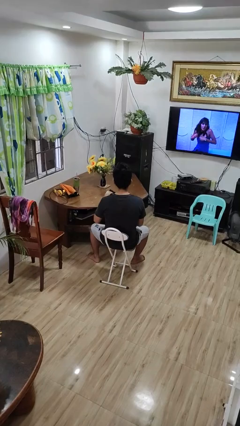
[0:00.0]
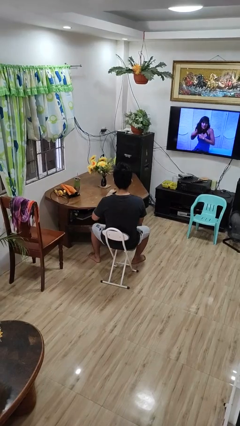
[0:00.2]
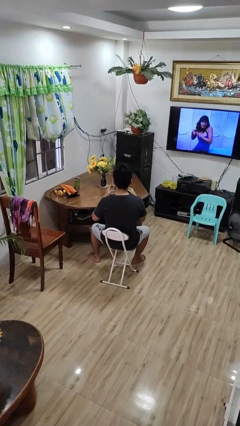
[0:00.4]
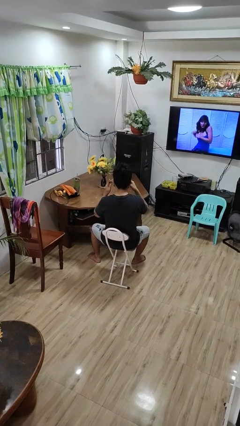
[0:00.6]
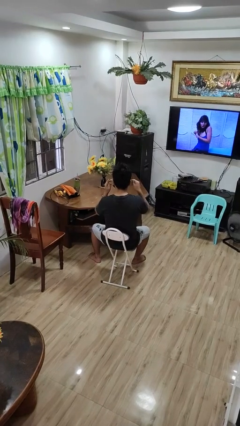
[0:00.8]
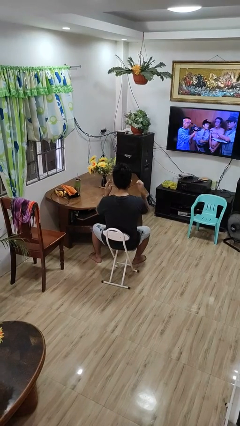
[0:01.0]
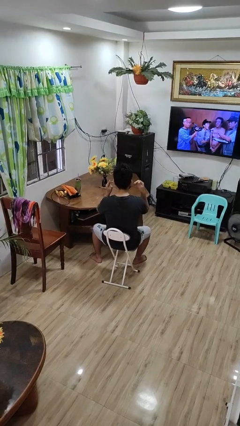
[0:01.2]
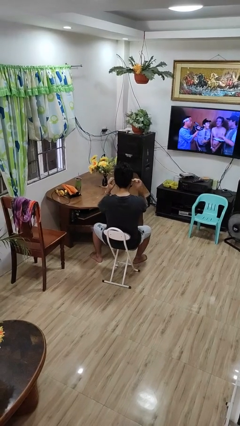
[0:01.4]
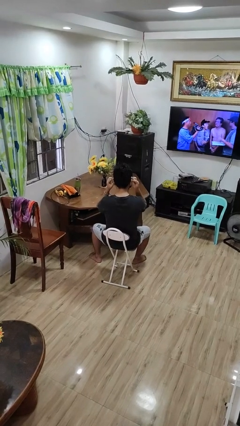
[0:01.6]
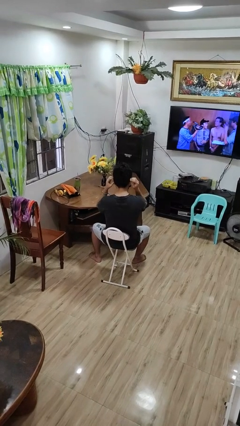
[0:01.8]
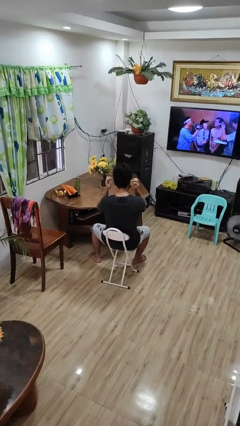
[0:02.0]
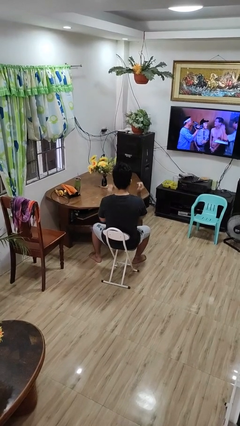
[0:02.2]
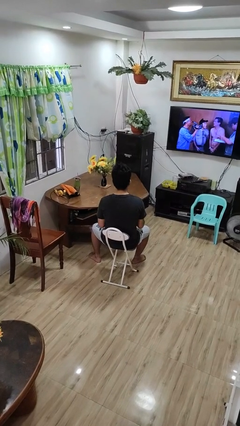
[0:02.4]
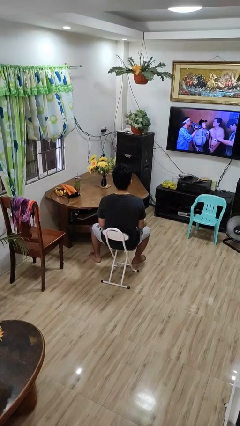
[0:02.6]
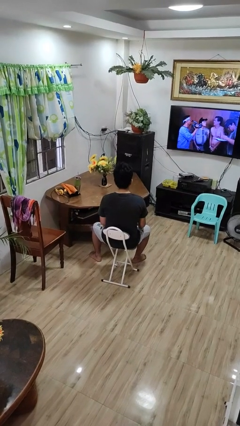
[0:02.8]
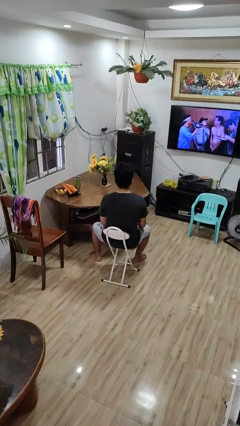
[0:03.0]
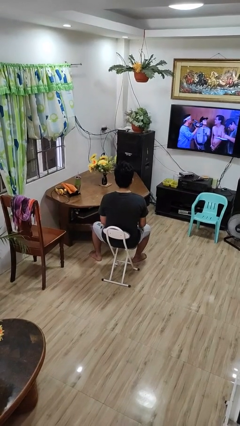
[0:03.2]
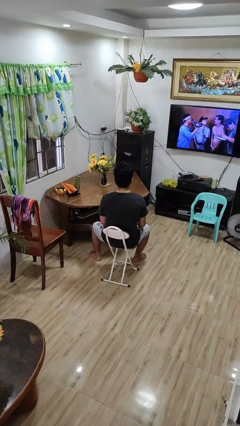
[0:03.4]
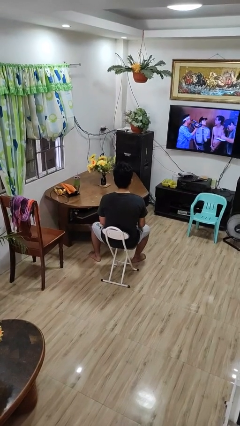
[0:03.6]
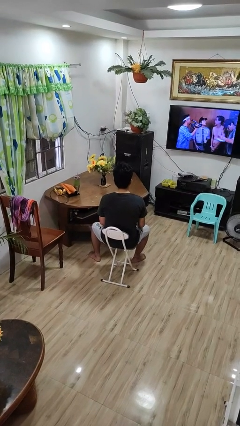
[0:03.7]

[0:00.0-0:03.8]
person puts on facemask

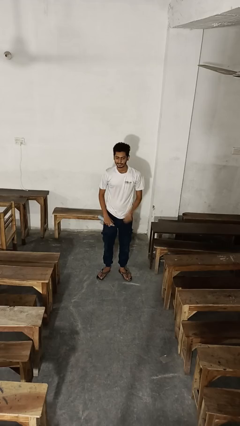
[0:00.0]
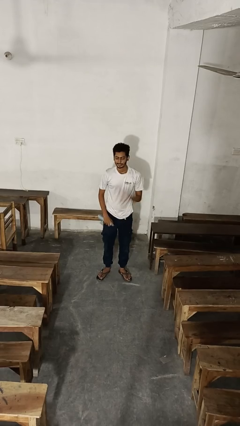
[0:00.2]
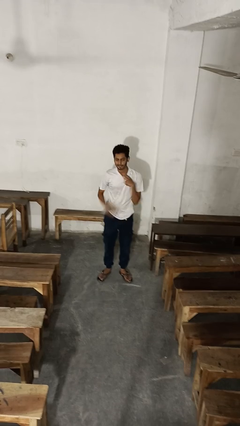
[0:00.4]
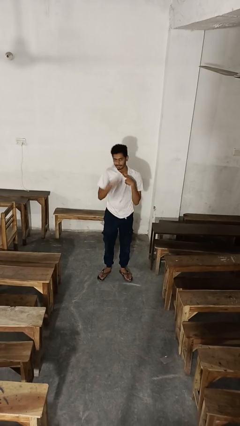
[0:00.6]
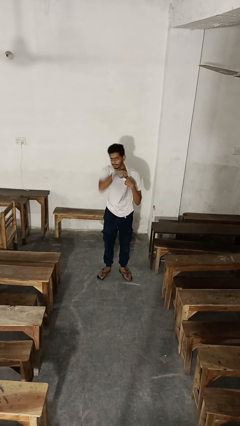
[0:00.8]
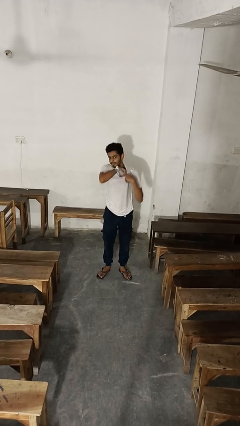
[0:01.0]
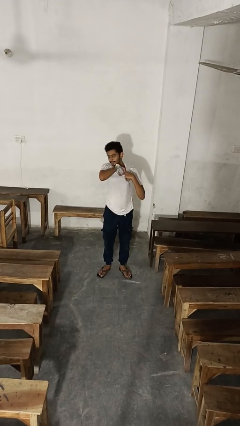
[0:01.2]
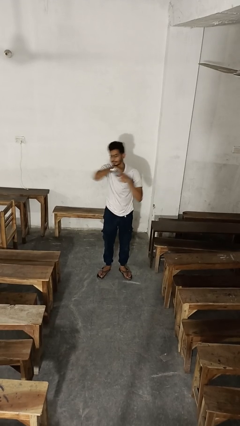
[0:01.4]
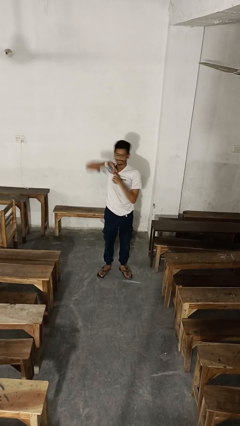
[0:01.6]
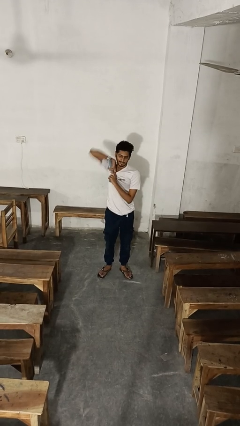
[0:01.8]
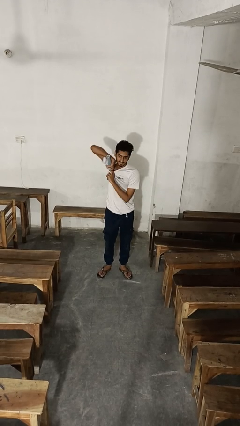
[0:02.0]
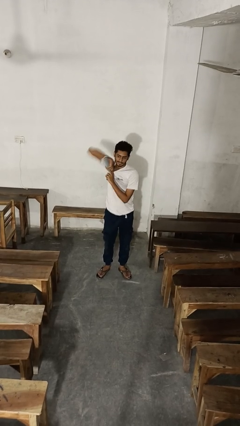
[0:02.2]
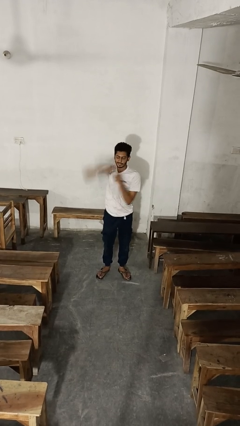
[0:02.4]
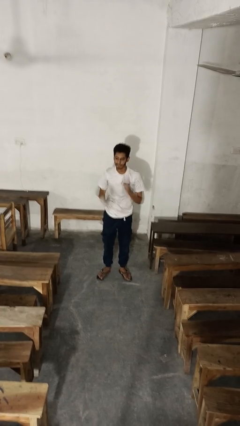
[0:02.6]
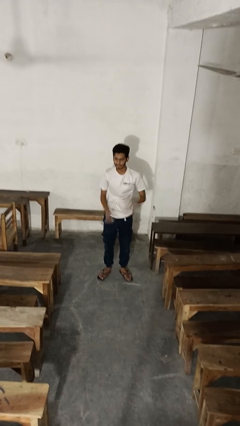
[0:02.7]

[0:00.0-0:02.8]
person applies deodorant

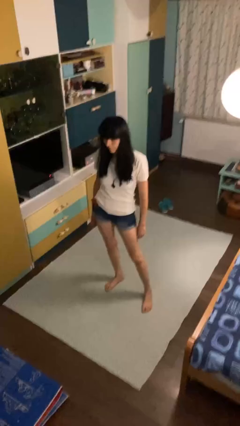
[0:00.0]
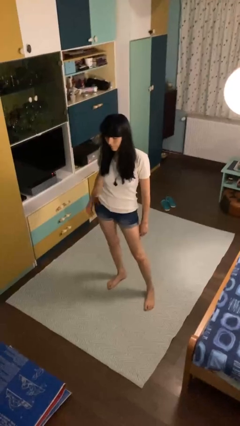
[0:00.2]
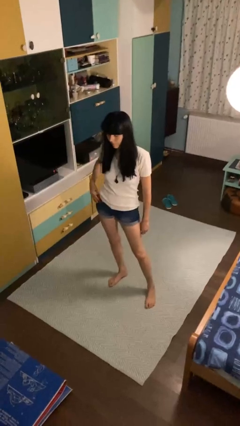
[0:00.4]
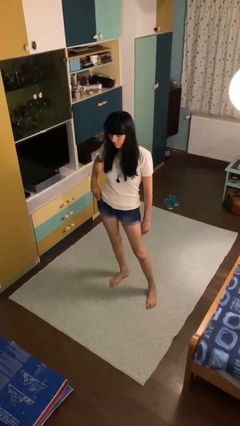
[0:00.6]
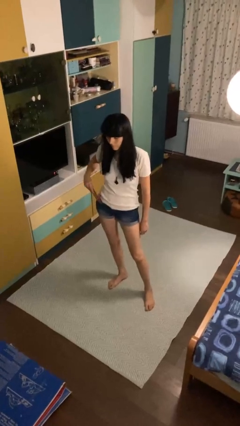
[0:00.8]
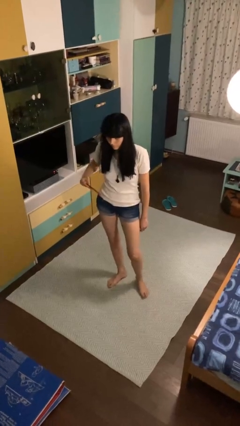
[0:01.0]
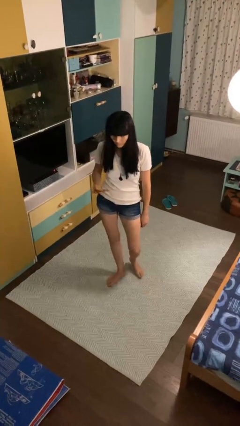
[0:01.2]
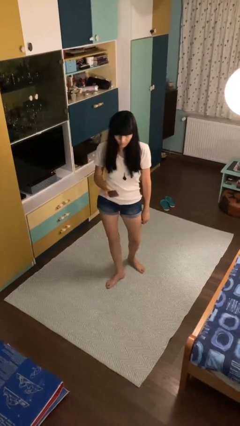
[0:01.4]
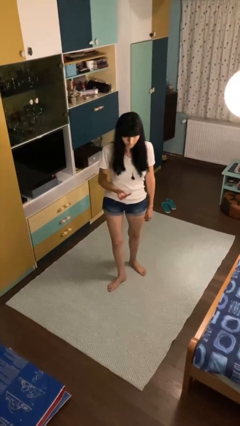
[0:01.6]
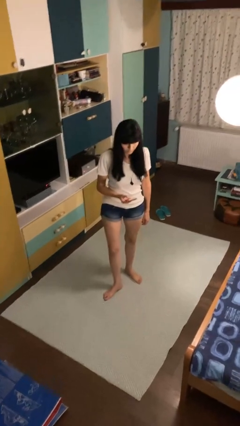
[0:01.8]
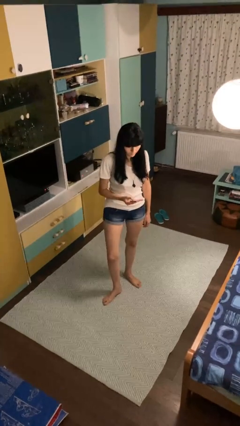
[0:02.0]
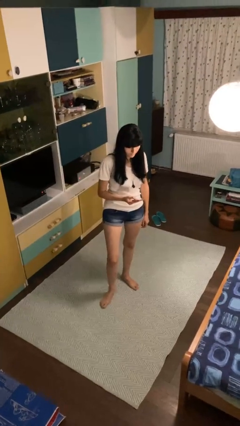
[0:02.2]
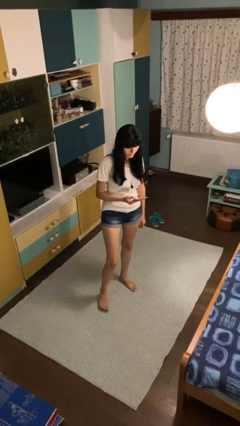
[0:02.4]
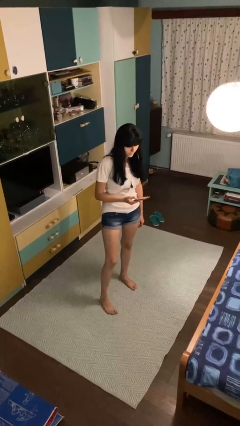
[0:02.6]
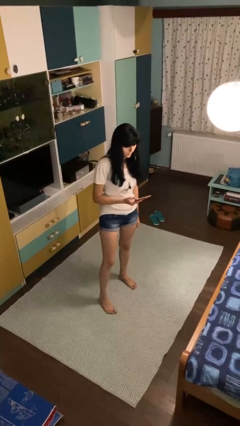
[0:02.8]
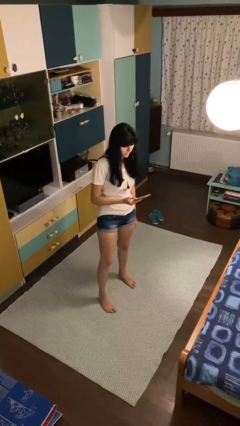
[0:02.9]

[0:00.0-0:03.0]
person takes phone from pocket

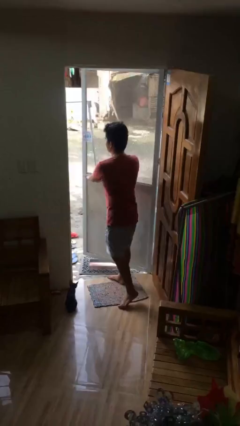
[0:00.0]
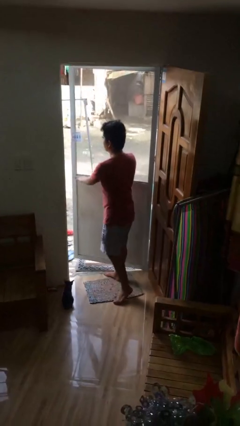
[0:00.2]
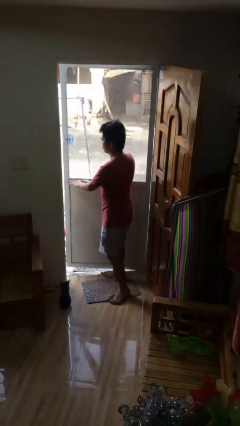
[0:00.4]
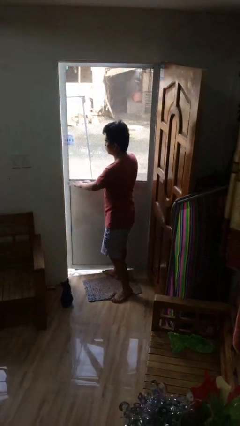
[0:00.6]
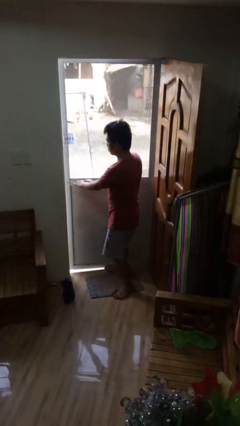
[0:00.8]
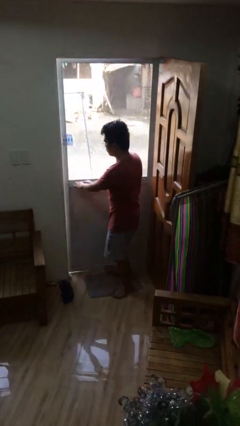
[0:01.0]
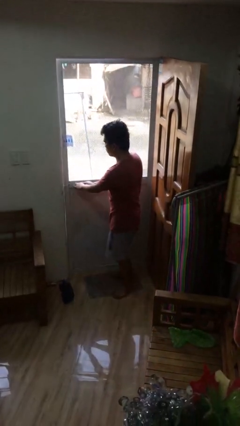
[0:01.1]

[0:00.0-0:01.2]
person closes facility door

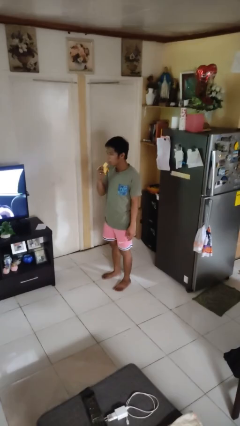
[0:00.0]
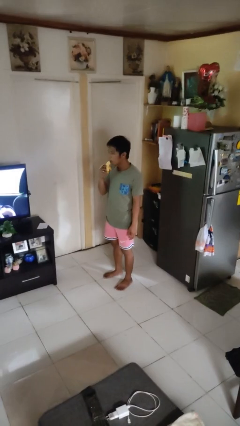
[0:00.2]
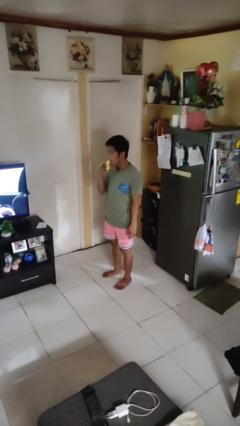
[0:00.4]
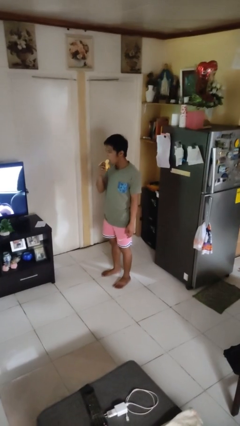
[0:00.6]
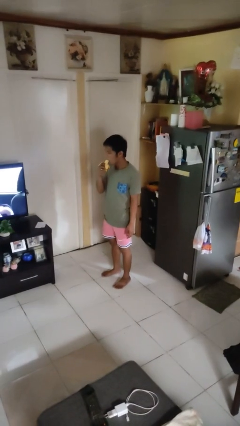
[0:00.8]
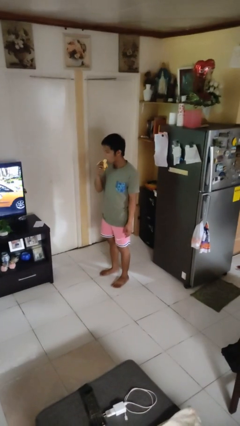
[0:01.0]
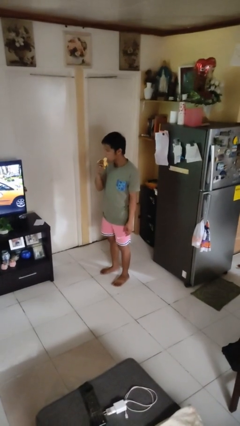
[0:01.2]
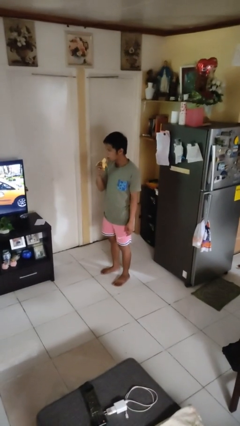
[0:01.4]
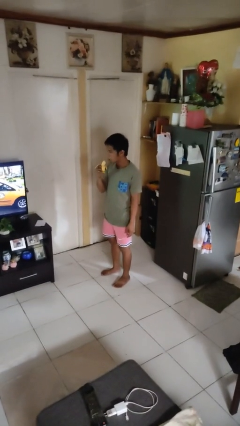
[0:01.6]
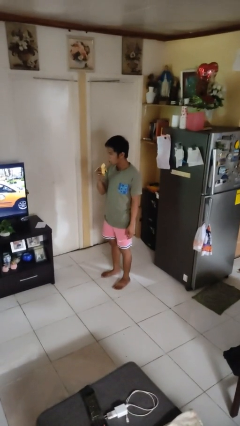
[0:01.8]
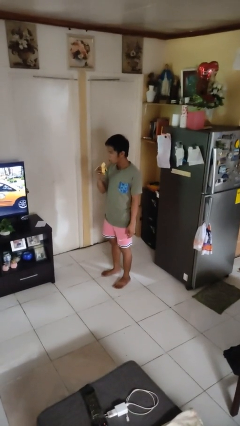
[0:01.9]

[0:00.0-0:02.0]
person eats banana

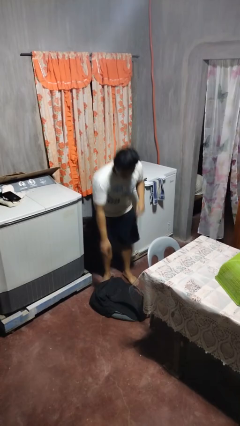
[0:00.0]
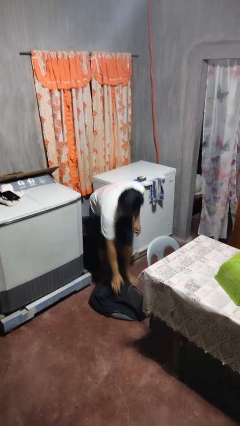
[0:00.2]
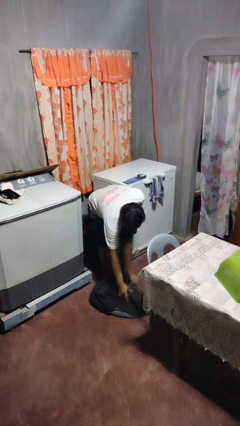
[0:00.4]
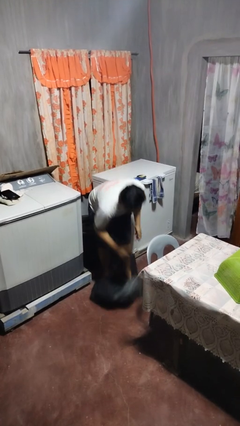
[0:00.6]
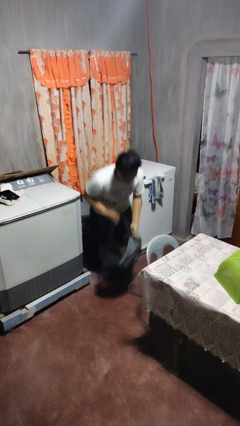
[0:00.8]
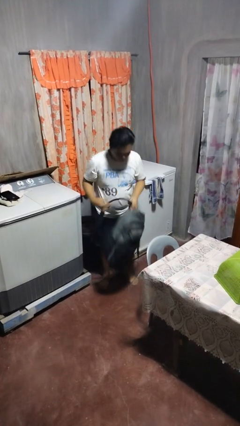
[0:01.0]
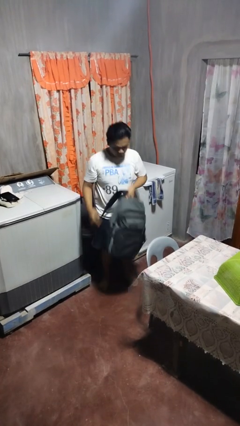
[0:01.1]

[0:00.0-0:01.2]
person picks up object from floor

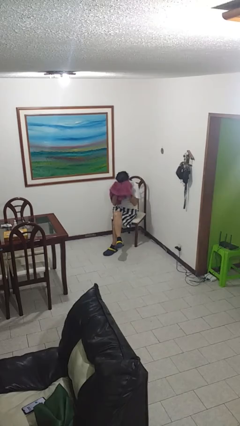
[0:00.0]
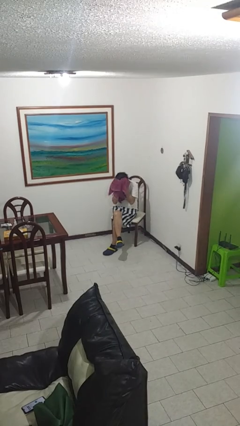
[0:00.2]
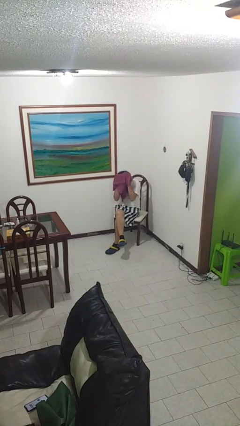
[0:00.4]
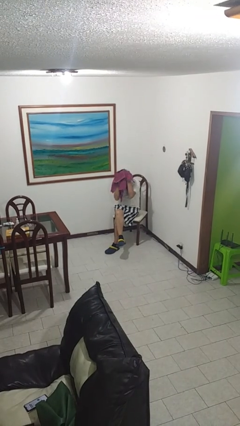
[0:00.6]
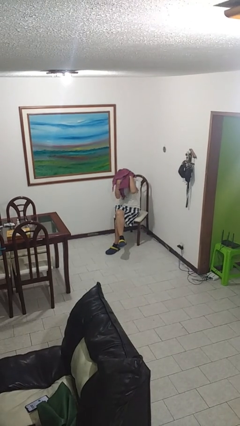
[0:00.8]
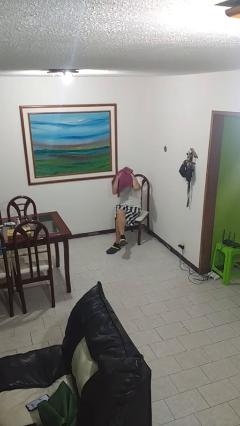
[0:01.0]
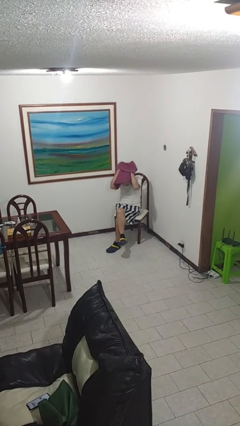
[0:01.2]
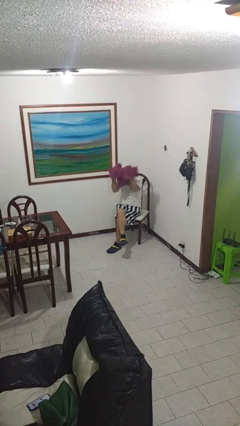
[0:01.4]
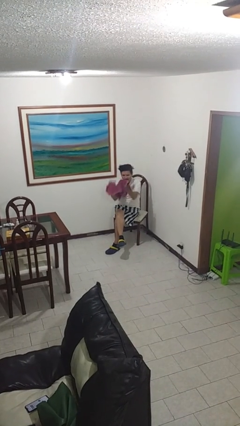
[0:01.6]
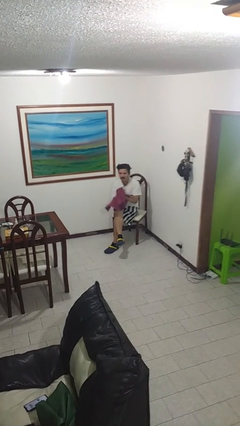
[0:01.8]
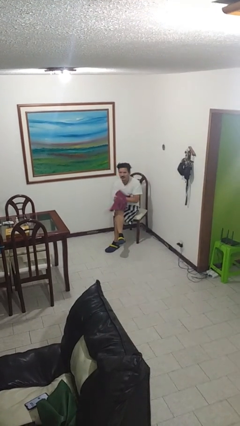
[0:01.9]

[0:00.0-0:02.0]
person dries hair with towel

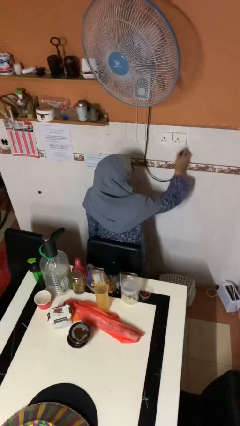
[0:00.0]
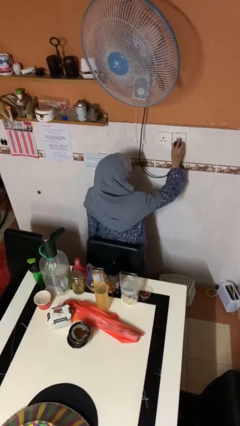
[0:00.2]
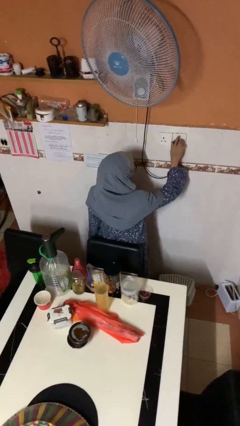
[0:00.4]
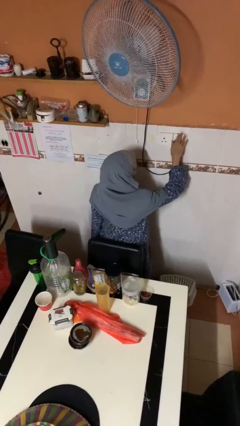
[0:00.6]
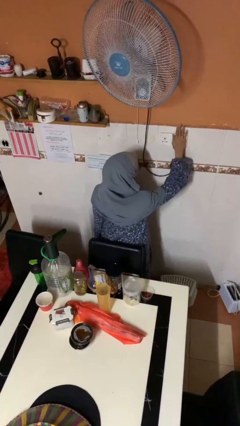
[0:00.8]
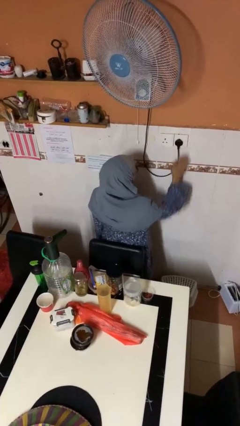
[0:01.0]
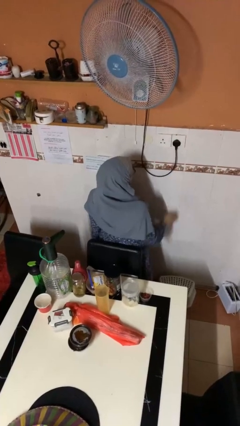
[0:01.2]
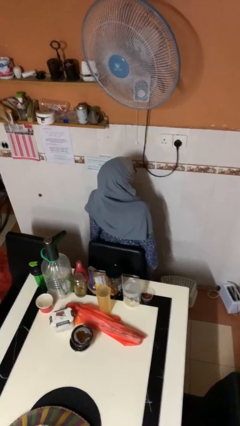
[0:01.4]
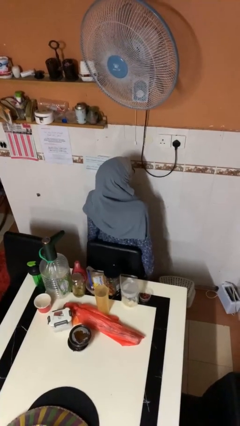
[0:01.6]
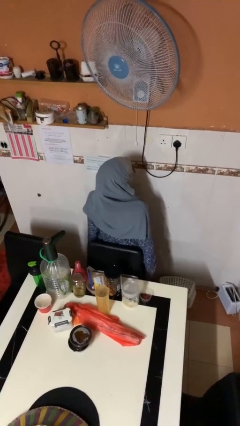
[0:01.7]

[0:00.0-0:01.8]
person plugs into electrical socket
